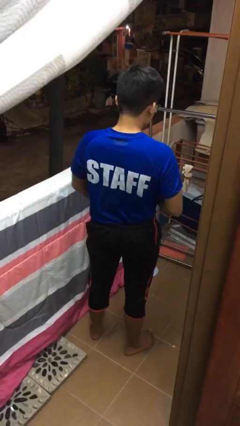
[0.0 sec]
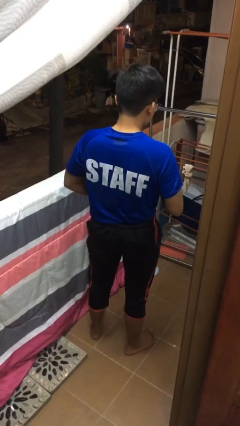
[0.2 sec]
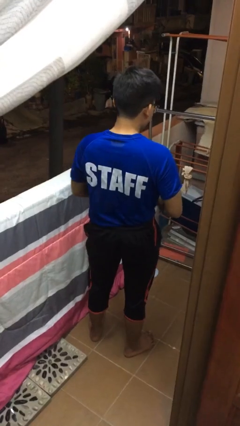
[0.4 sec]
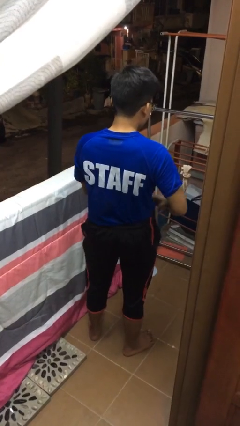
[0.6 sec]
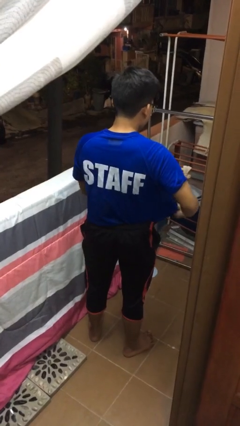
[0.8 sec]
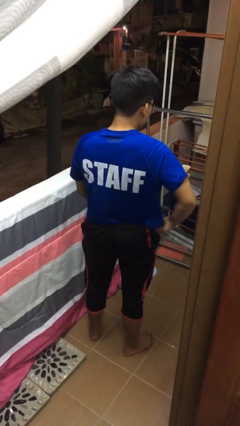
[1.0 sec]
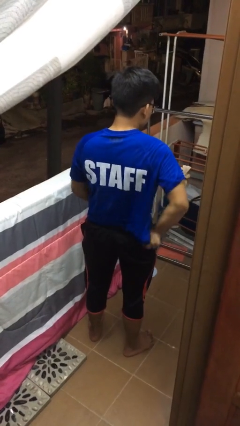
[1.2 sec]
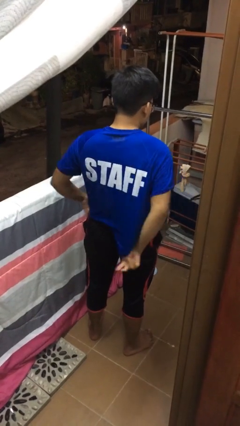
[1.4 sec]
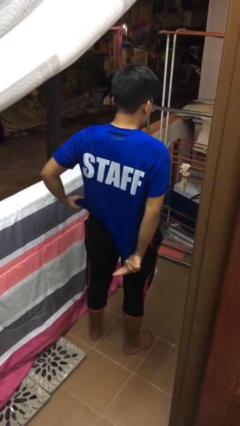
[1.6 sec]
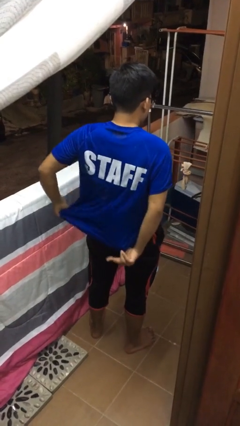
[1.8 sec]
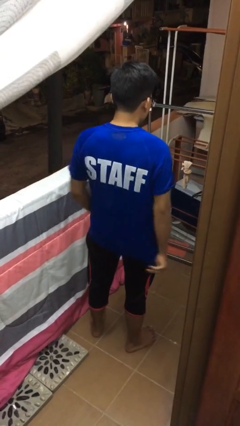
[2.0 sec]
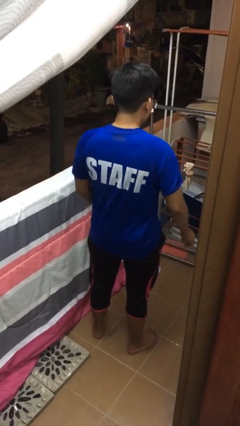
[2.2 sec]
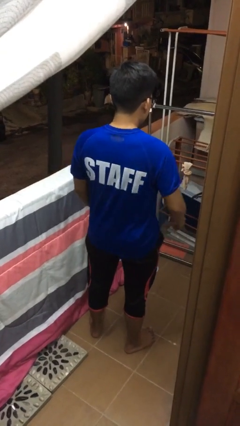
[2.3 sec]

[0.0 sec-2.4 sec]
person untucks shirt

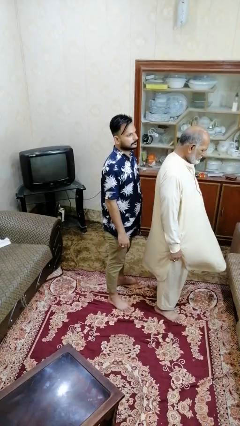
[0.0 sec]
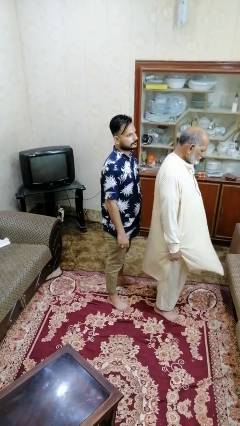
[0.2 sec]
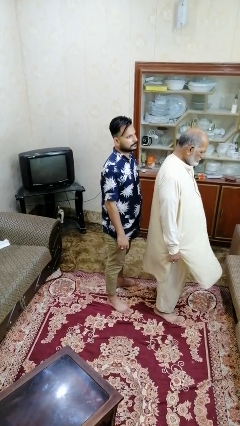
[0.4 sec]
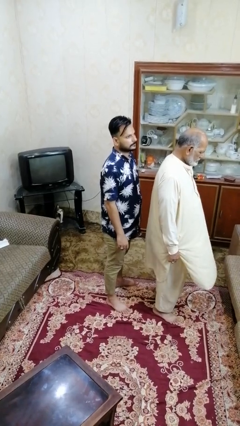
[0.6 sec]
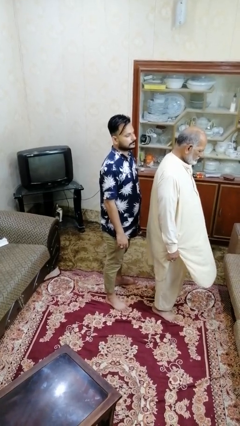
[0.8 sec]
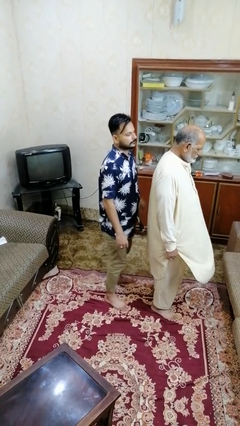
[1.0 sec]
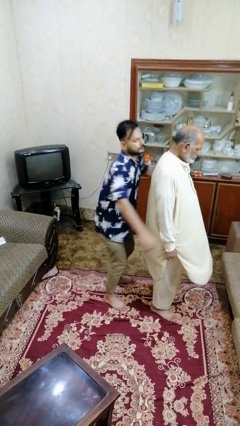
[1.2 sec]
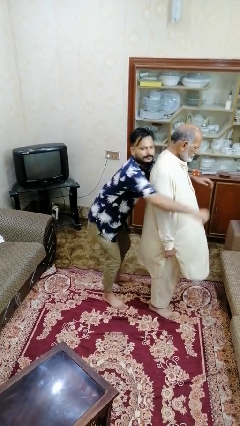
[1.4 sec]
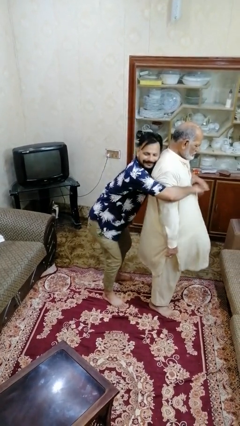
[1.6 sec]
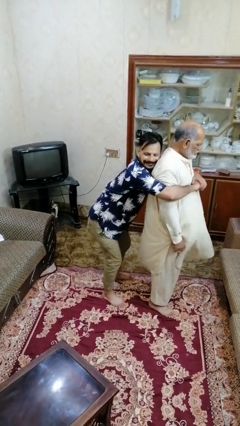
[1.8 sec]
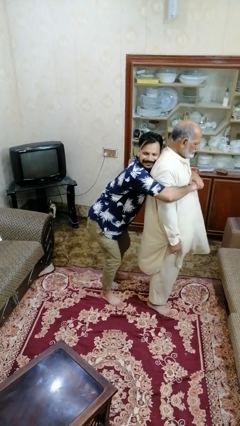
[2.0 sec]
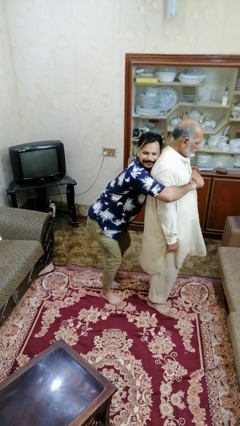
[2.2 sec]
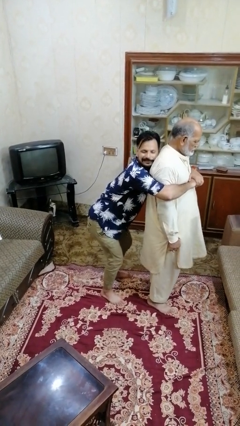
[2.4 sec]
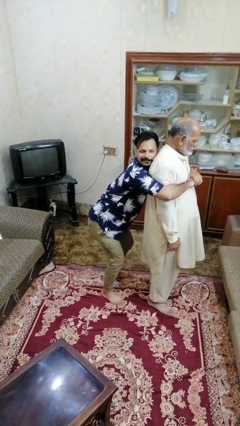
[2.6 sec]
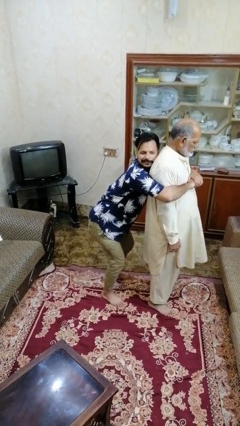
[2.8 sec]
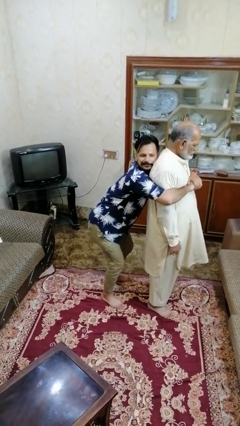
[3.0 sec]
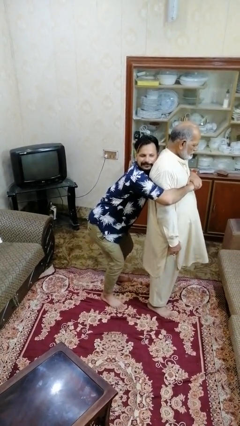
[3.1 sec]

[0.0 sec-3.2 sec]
person grabs person by forearm

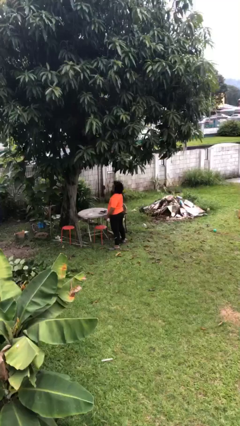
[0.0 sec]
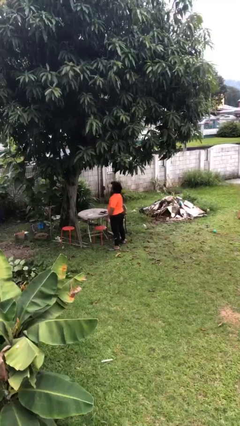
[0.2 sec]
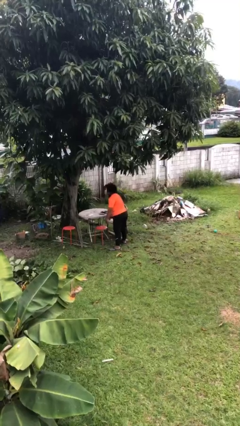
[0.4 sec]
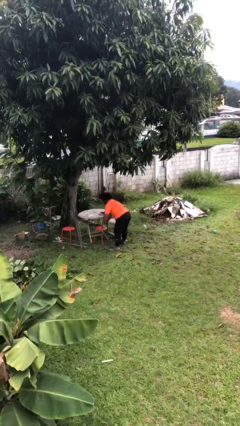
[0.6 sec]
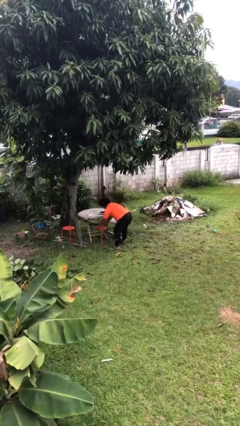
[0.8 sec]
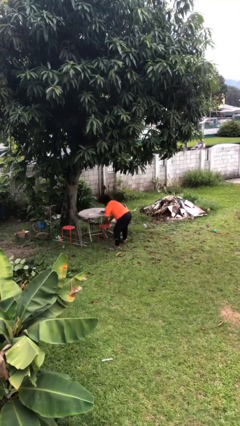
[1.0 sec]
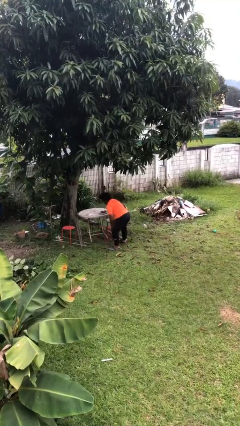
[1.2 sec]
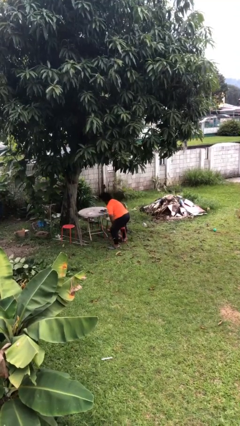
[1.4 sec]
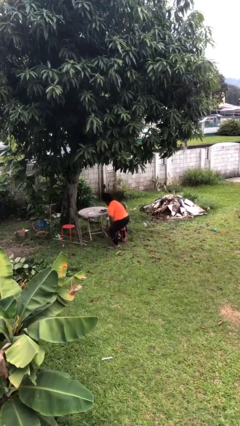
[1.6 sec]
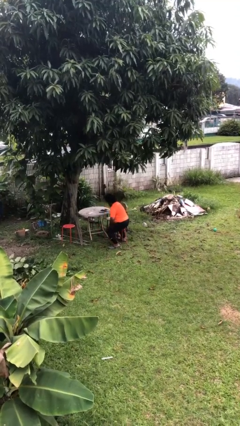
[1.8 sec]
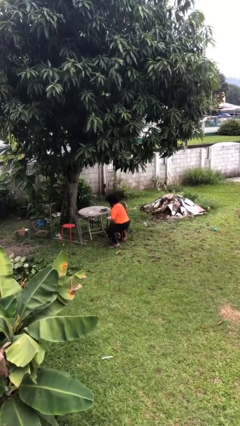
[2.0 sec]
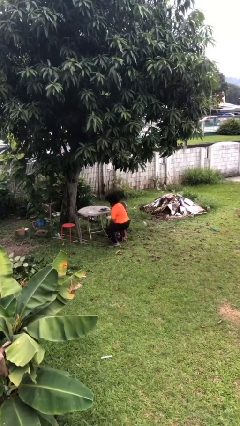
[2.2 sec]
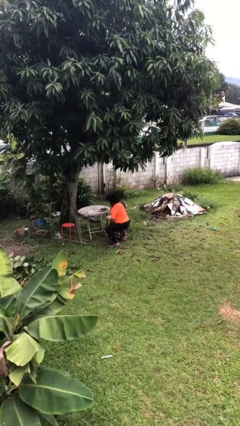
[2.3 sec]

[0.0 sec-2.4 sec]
person sits down

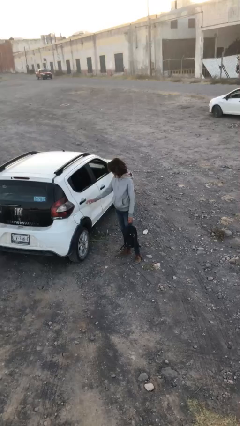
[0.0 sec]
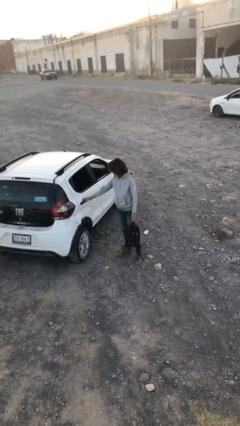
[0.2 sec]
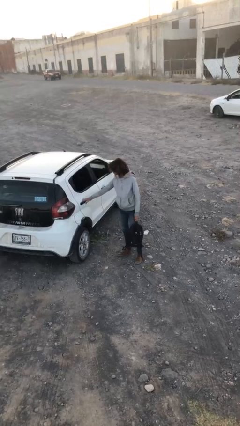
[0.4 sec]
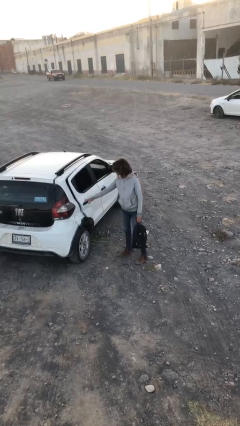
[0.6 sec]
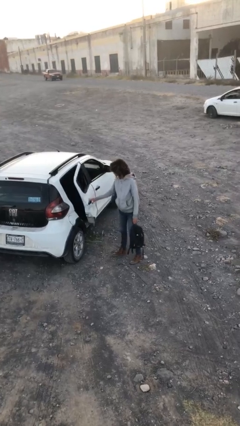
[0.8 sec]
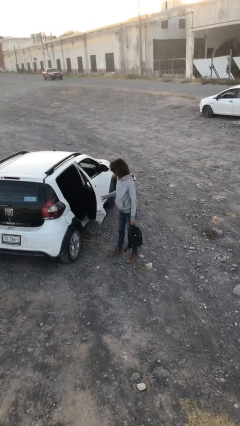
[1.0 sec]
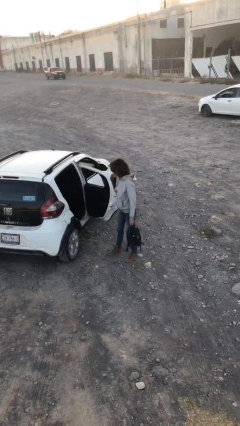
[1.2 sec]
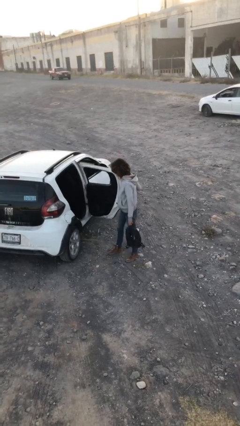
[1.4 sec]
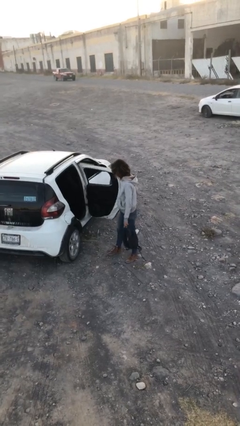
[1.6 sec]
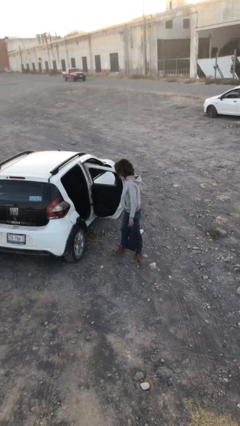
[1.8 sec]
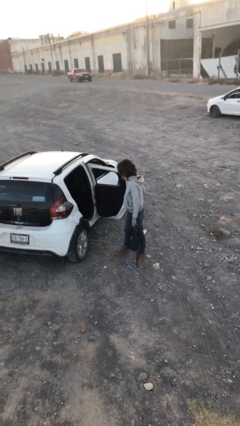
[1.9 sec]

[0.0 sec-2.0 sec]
person opens car door

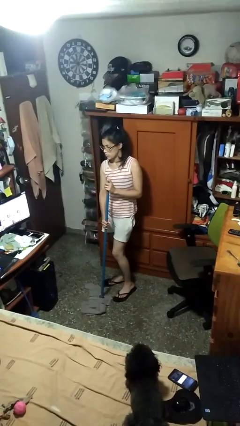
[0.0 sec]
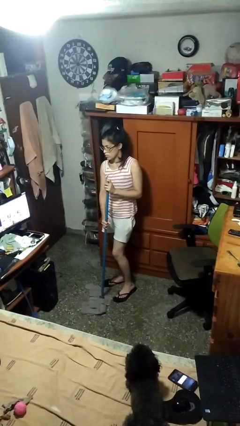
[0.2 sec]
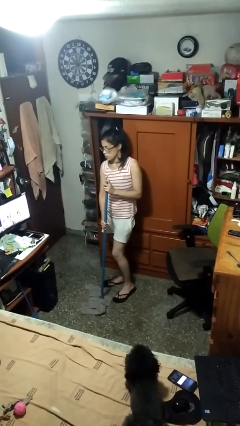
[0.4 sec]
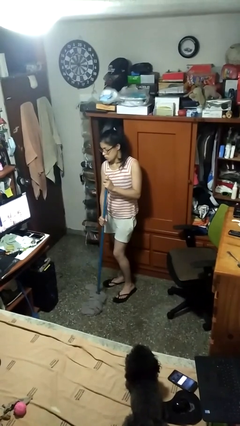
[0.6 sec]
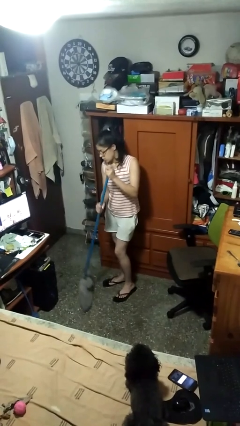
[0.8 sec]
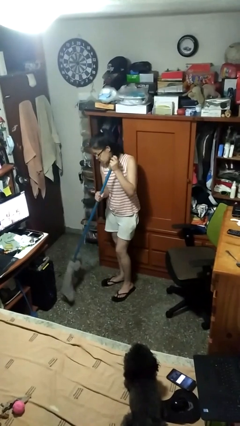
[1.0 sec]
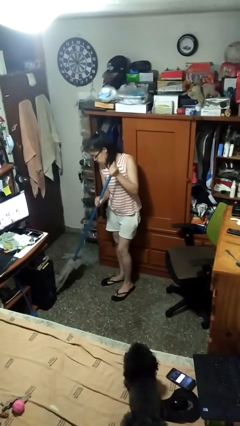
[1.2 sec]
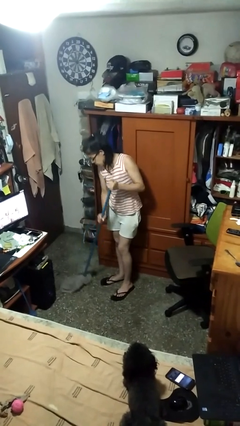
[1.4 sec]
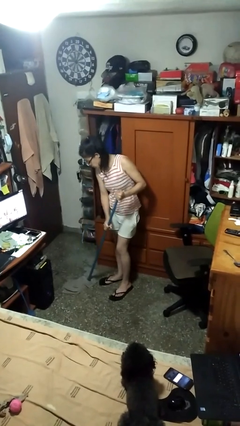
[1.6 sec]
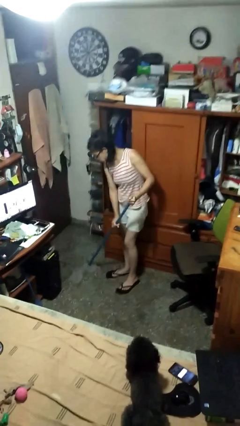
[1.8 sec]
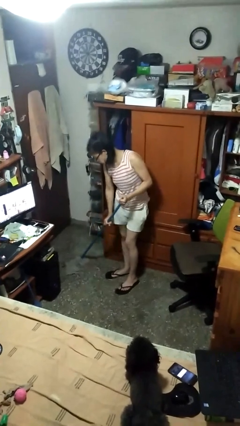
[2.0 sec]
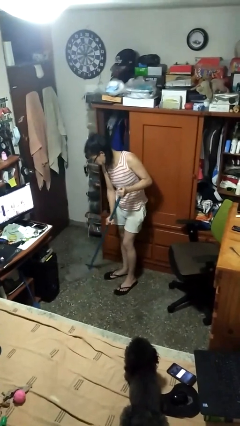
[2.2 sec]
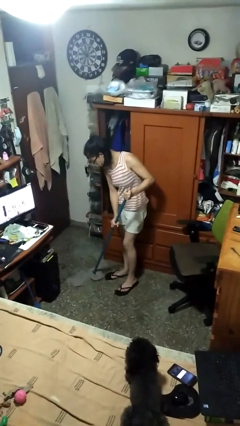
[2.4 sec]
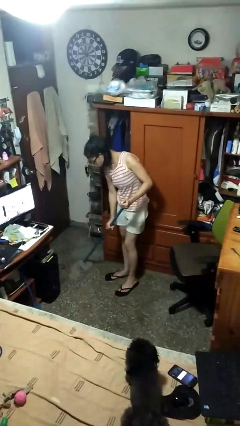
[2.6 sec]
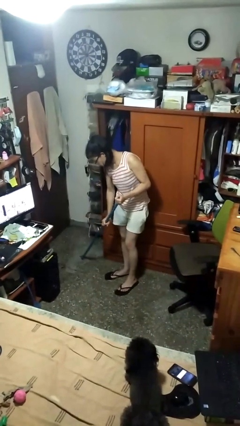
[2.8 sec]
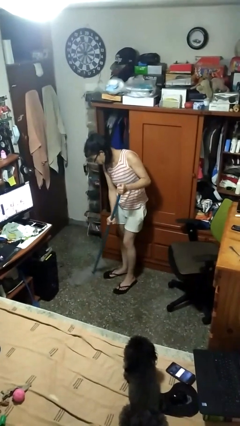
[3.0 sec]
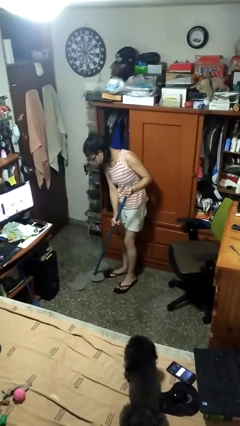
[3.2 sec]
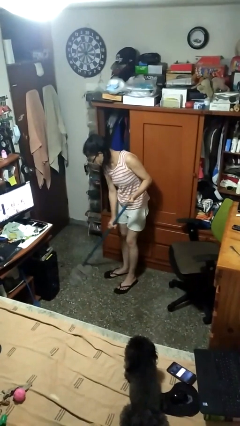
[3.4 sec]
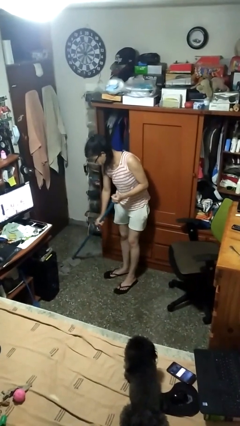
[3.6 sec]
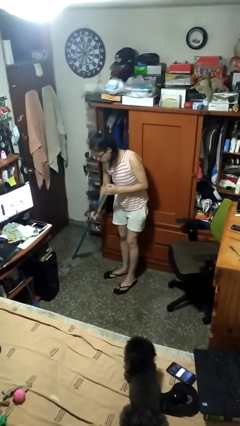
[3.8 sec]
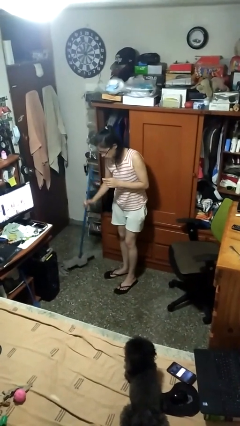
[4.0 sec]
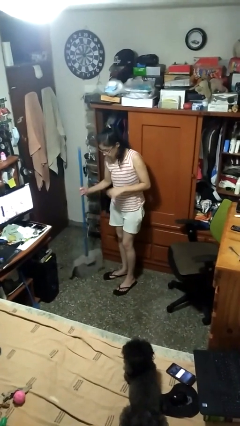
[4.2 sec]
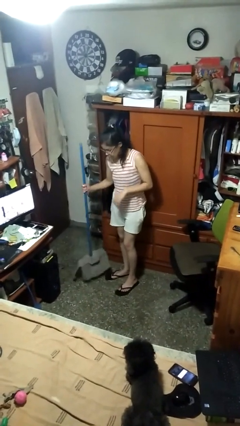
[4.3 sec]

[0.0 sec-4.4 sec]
person mops

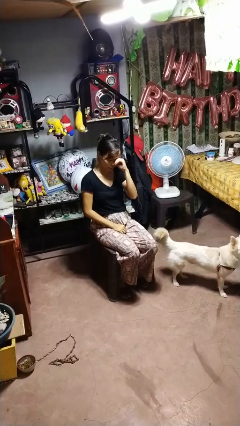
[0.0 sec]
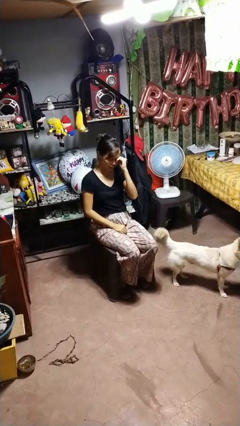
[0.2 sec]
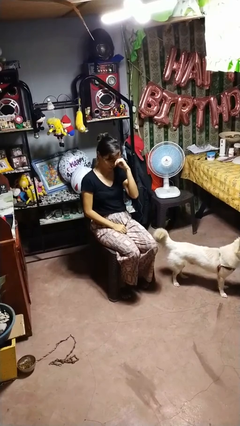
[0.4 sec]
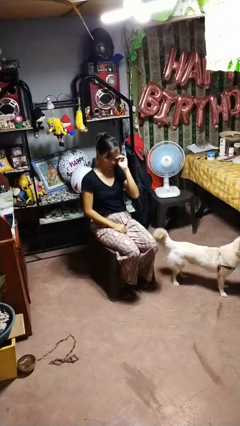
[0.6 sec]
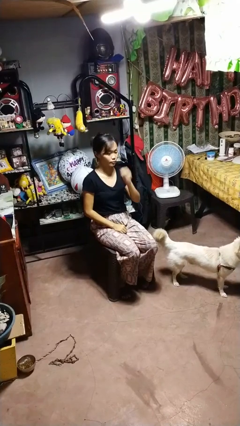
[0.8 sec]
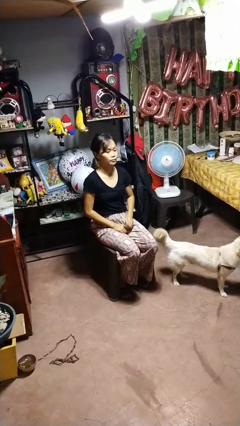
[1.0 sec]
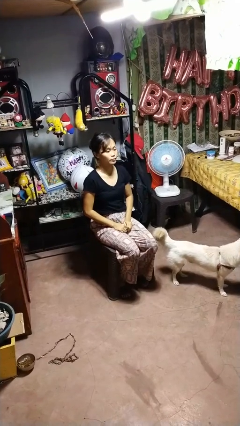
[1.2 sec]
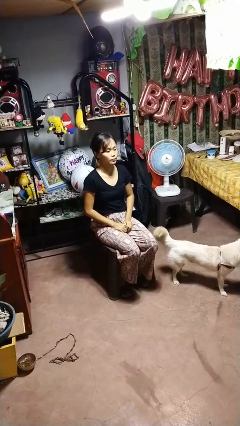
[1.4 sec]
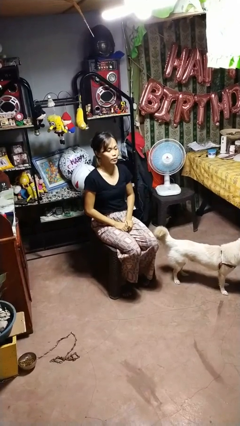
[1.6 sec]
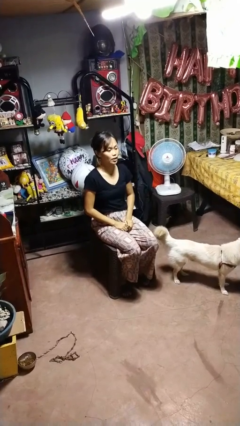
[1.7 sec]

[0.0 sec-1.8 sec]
person rubs eyes

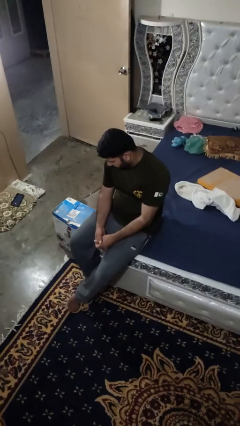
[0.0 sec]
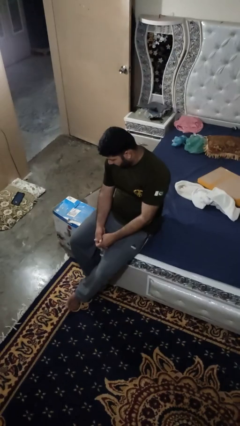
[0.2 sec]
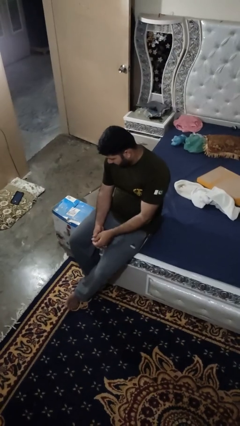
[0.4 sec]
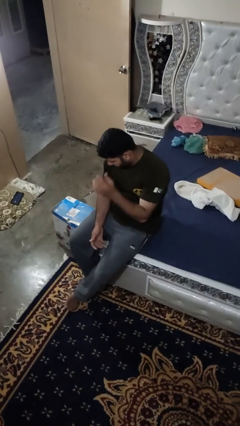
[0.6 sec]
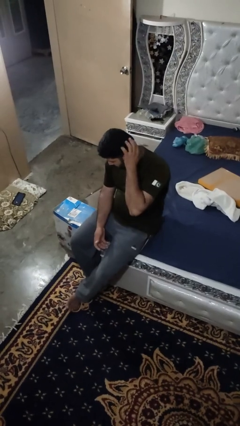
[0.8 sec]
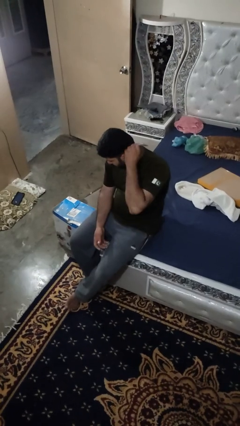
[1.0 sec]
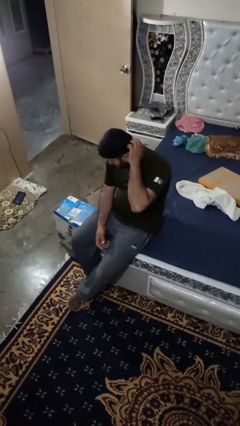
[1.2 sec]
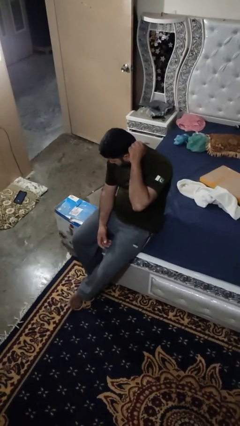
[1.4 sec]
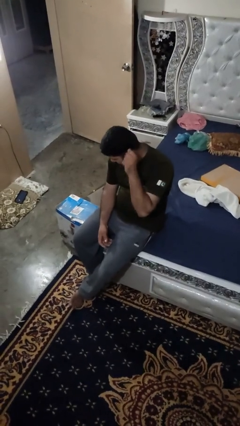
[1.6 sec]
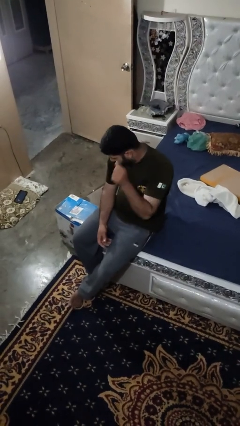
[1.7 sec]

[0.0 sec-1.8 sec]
person strokes hair
